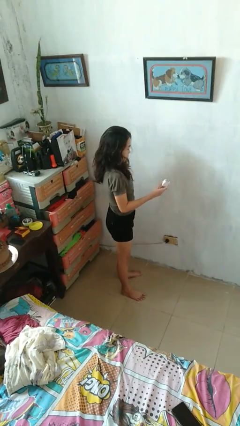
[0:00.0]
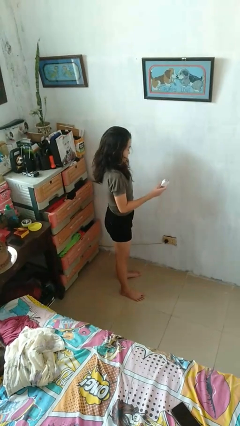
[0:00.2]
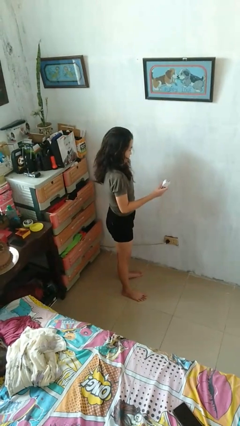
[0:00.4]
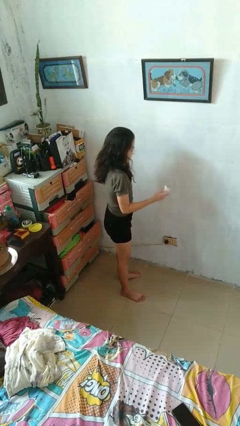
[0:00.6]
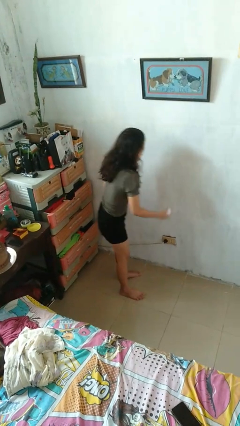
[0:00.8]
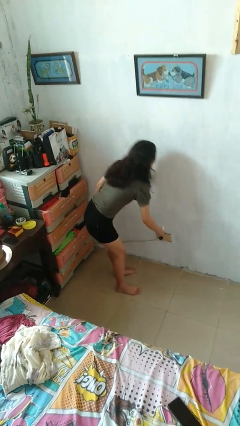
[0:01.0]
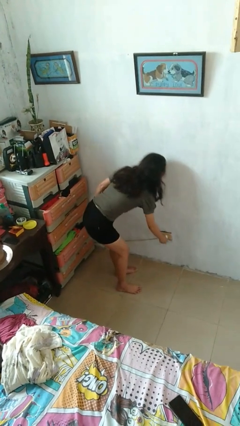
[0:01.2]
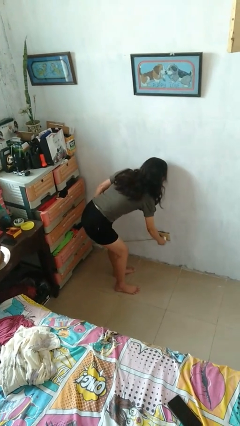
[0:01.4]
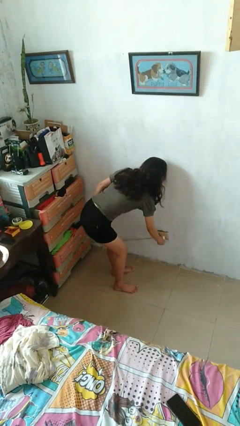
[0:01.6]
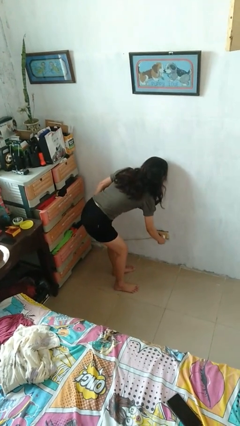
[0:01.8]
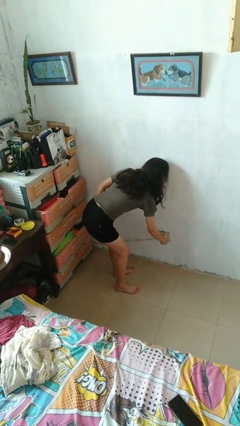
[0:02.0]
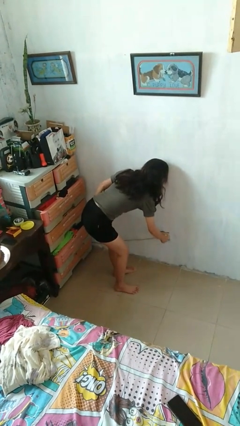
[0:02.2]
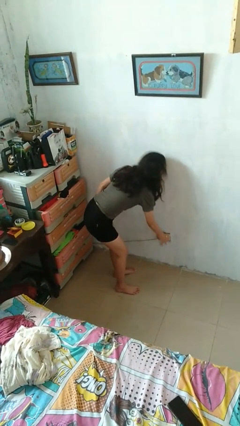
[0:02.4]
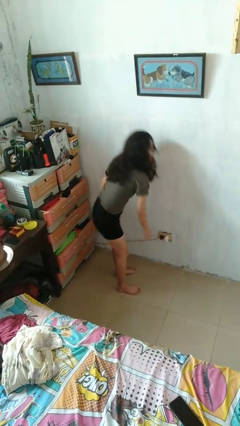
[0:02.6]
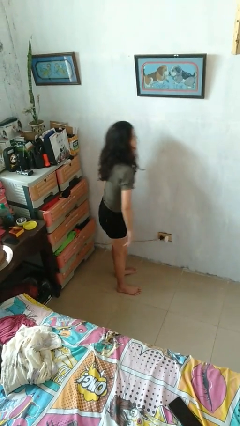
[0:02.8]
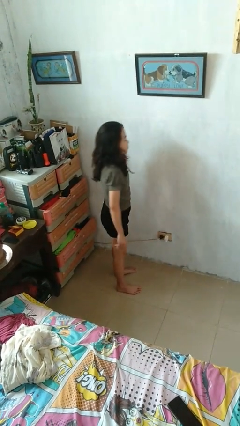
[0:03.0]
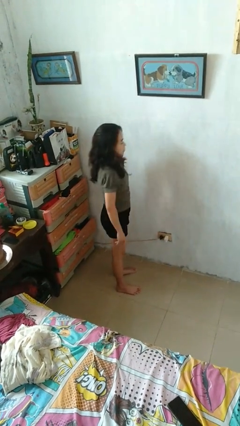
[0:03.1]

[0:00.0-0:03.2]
person plugs into electrical socket

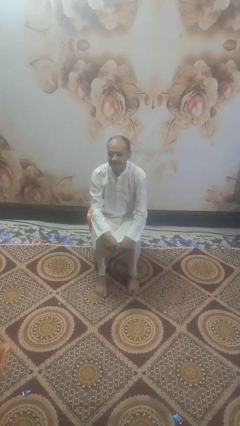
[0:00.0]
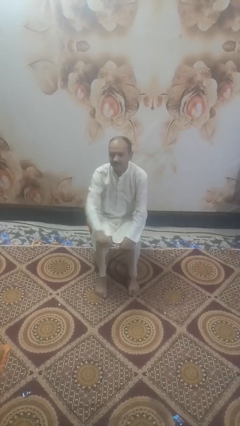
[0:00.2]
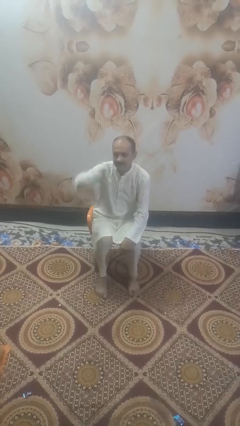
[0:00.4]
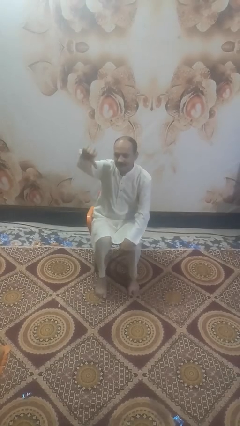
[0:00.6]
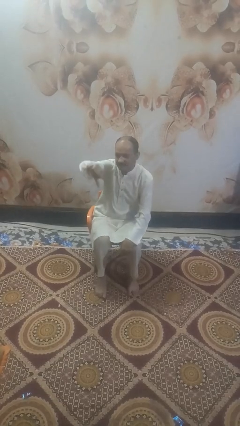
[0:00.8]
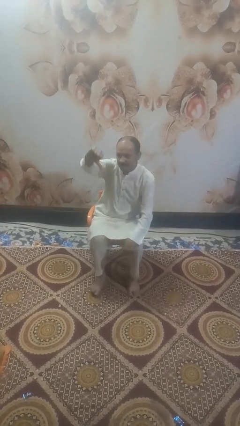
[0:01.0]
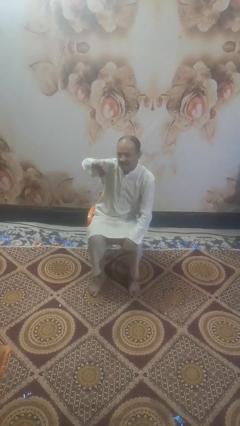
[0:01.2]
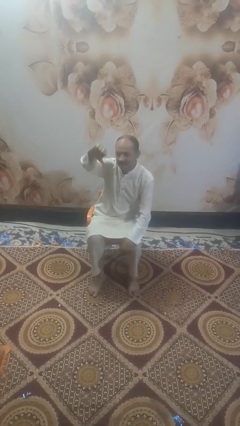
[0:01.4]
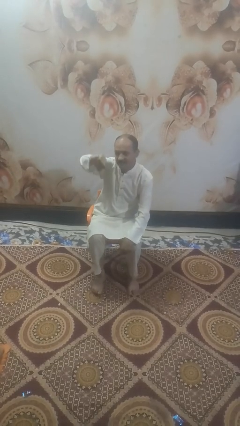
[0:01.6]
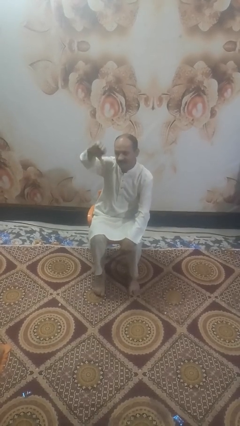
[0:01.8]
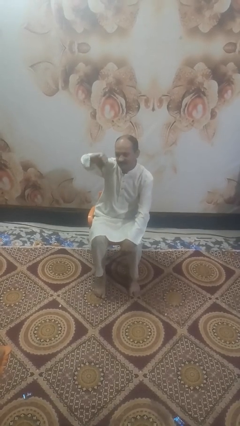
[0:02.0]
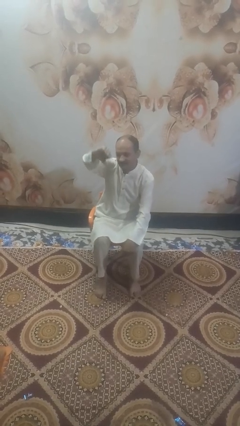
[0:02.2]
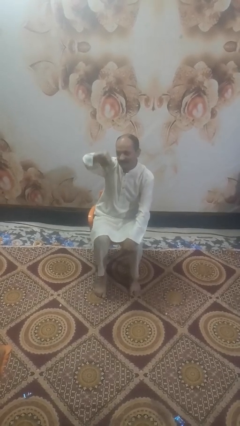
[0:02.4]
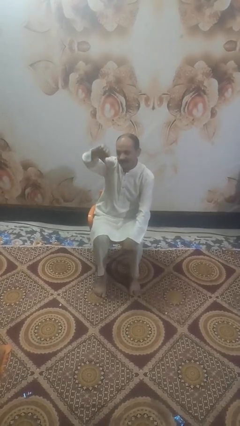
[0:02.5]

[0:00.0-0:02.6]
person gestures thumbs down

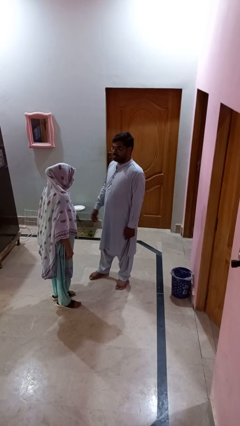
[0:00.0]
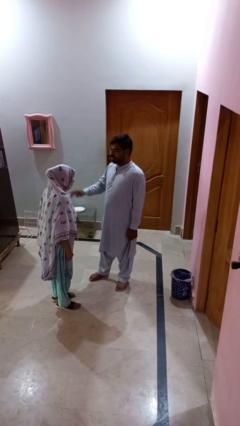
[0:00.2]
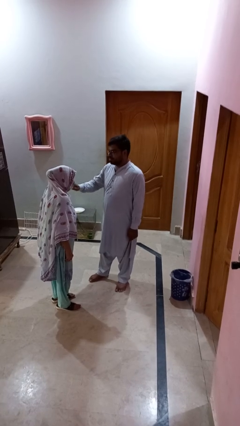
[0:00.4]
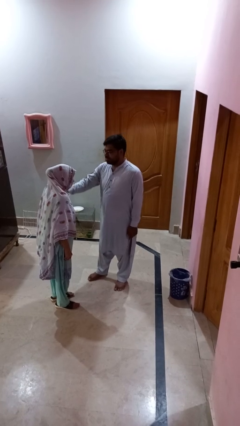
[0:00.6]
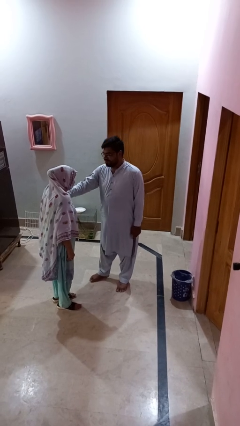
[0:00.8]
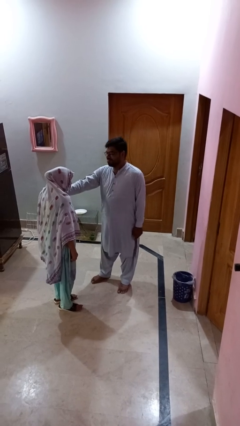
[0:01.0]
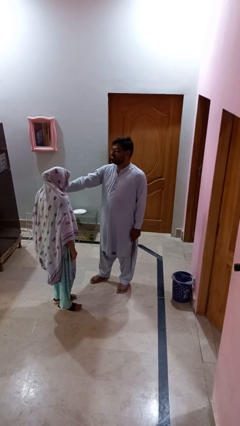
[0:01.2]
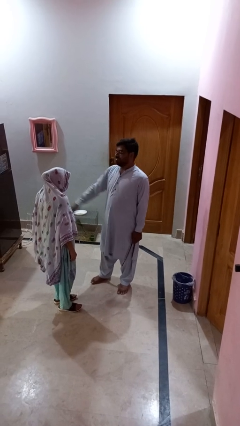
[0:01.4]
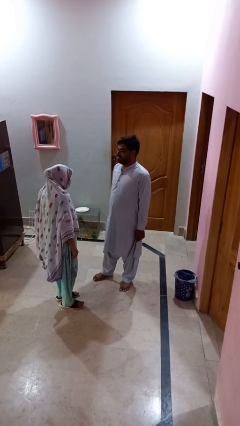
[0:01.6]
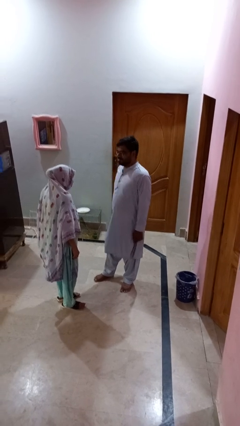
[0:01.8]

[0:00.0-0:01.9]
person shoves person

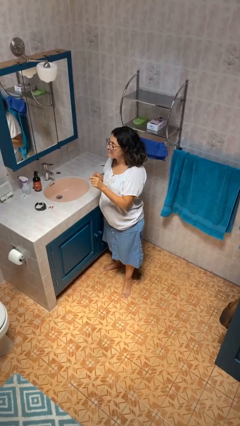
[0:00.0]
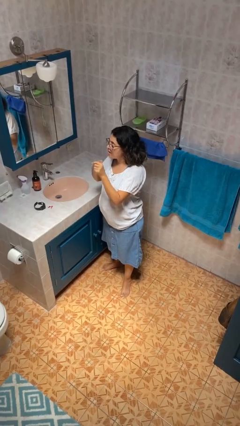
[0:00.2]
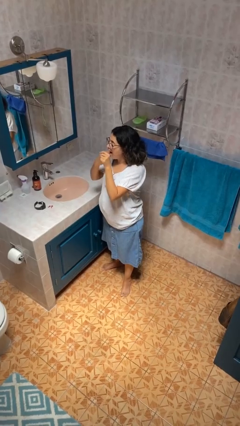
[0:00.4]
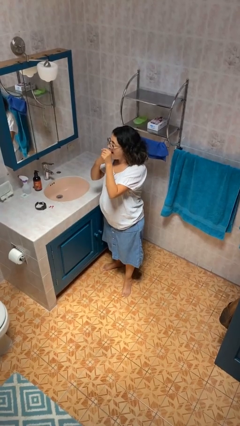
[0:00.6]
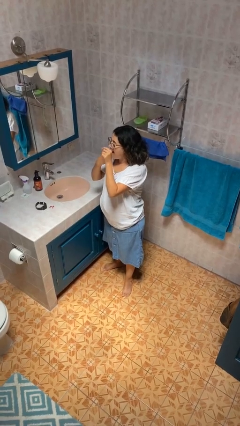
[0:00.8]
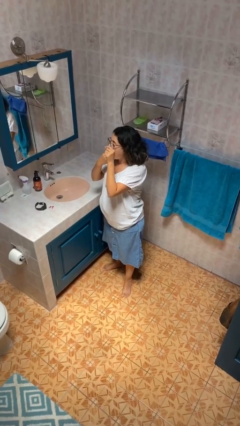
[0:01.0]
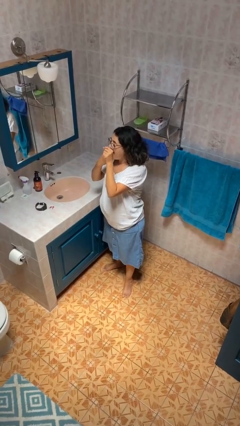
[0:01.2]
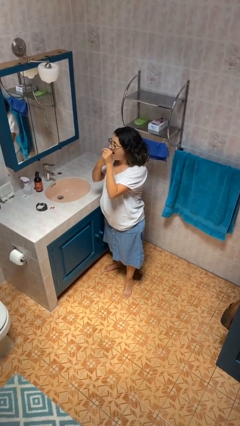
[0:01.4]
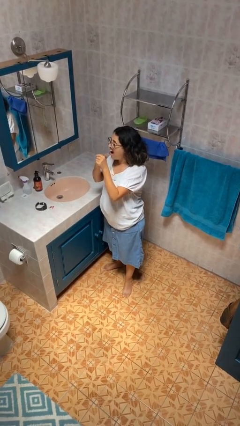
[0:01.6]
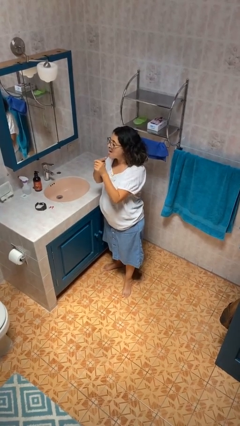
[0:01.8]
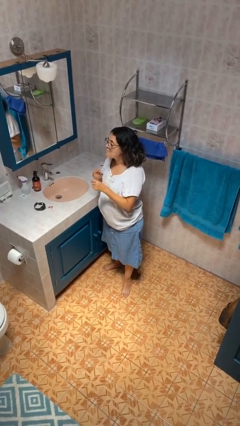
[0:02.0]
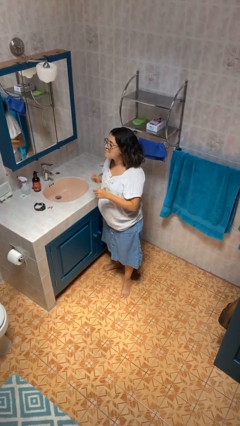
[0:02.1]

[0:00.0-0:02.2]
person flosses

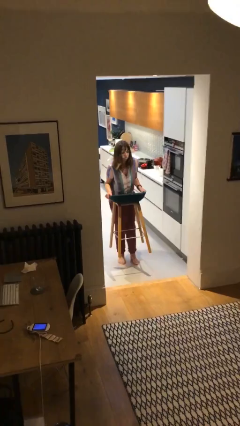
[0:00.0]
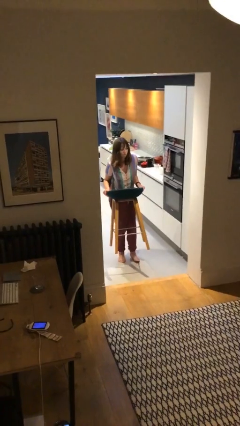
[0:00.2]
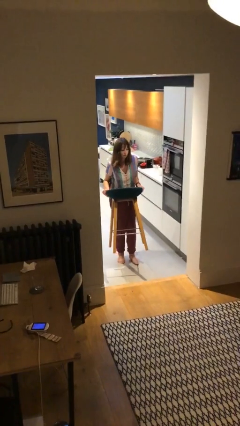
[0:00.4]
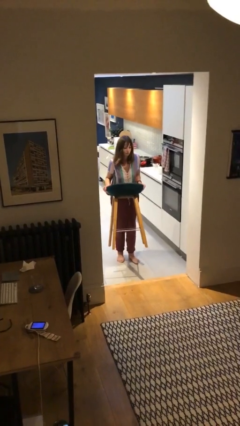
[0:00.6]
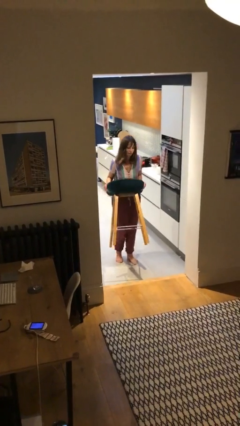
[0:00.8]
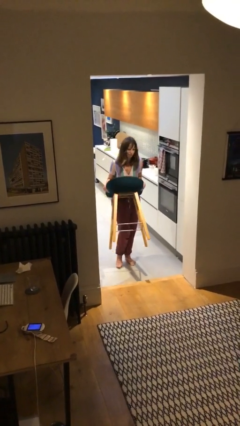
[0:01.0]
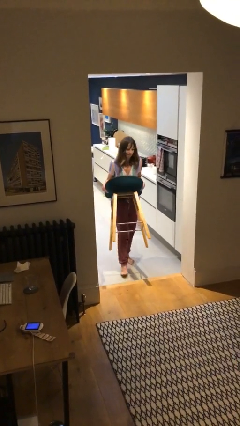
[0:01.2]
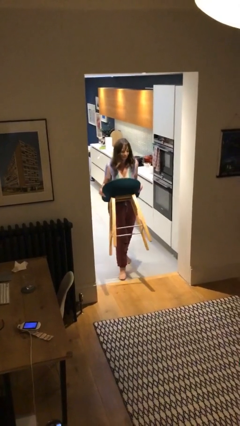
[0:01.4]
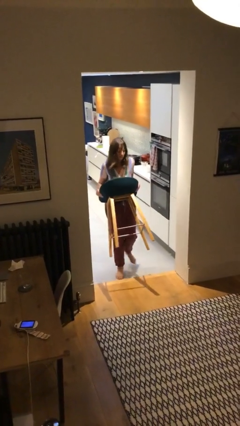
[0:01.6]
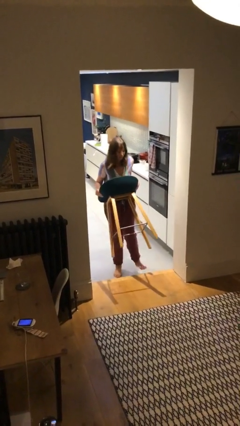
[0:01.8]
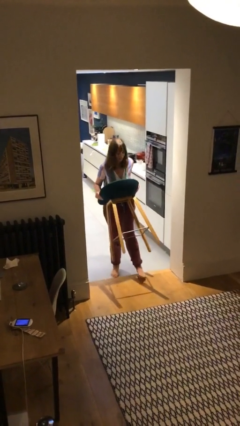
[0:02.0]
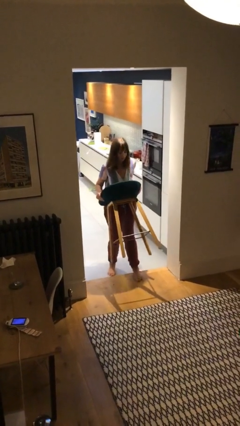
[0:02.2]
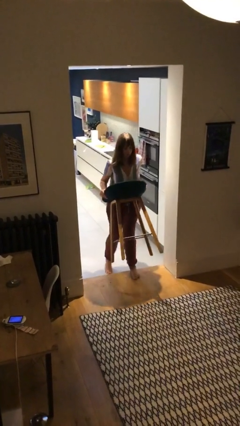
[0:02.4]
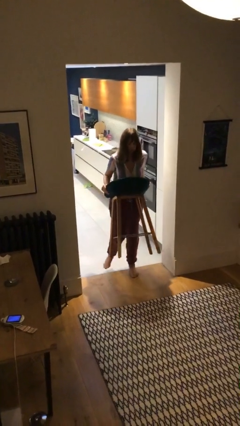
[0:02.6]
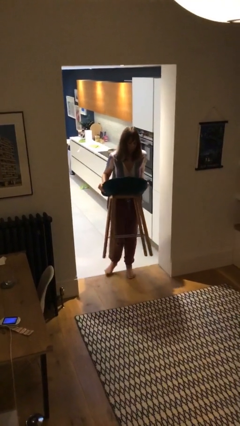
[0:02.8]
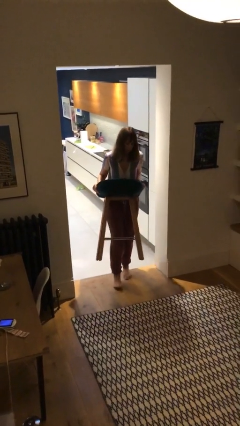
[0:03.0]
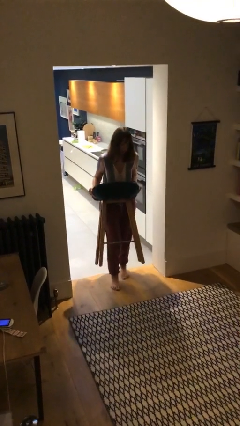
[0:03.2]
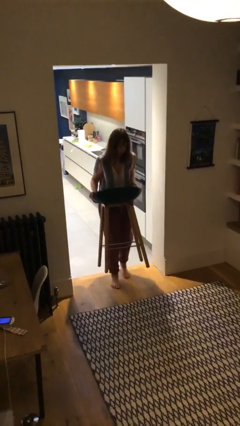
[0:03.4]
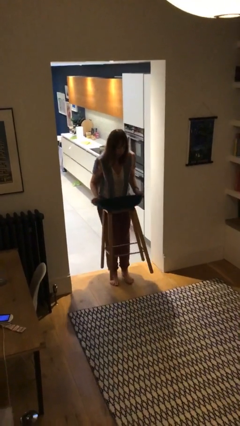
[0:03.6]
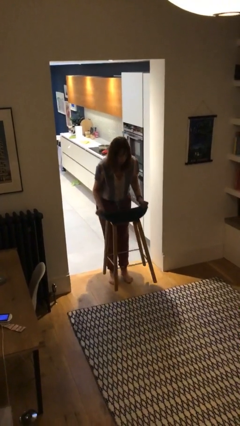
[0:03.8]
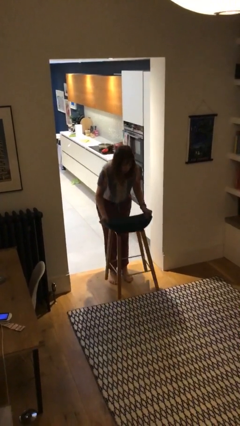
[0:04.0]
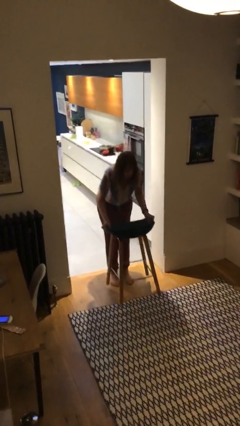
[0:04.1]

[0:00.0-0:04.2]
person carries heavy object

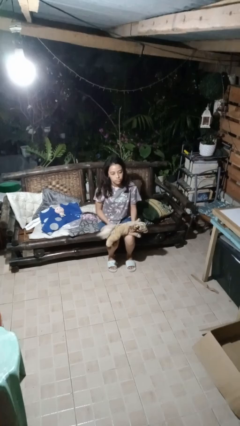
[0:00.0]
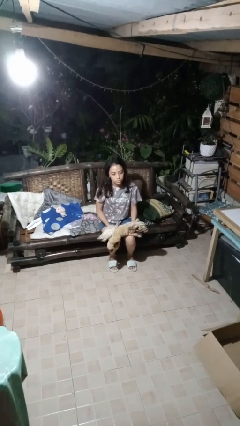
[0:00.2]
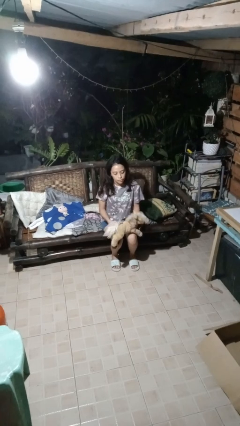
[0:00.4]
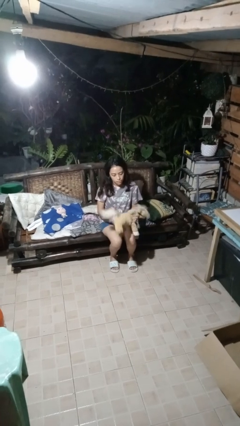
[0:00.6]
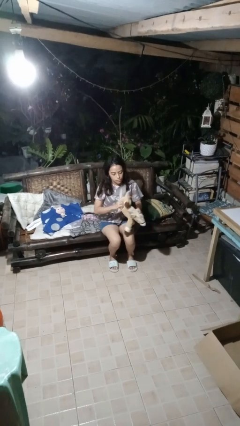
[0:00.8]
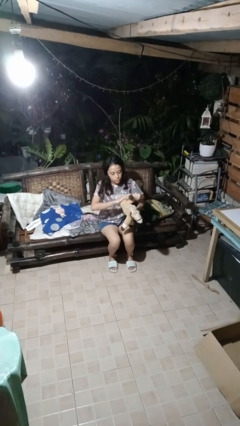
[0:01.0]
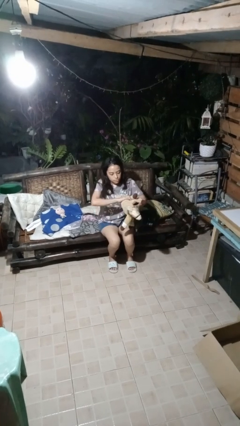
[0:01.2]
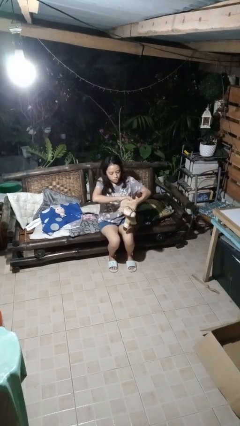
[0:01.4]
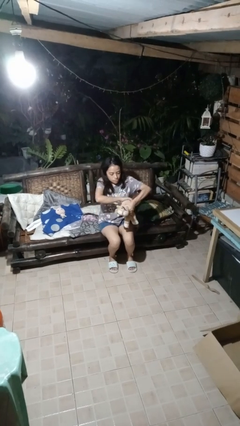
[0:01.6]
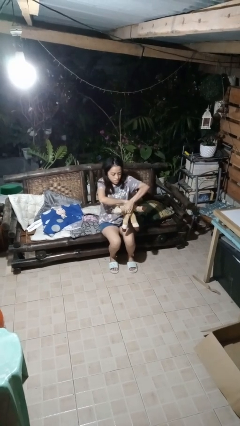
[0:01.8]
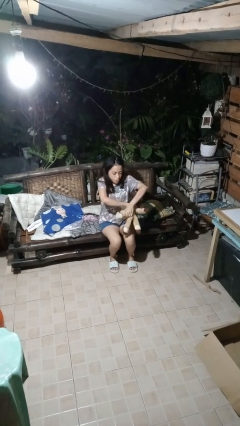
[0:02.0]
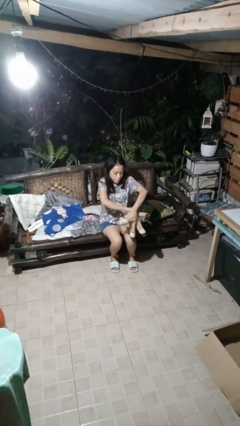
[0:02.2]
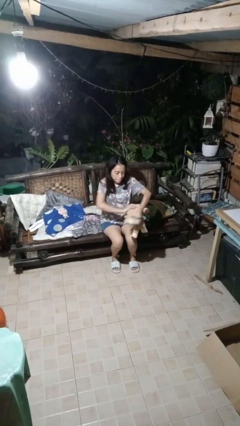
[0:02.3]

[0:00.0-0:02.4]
person squeezes object

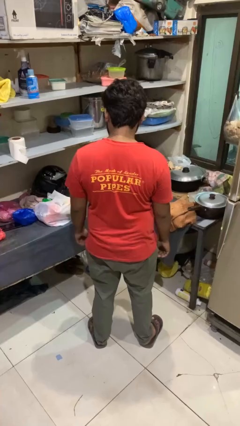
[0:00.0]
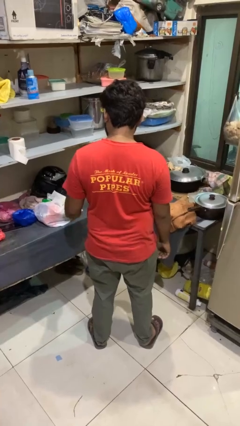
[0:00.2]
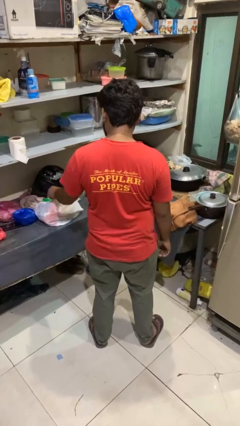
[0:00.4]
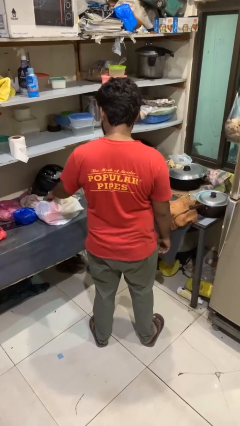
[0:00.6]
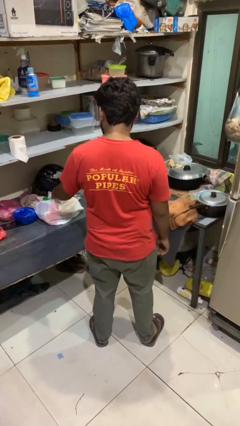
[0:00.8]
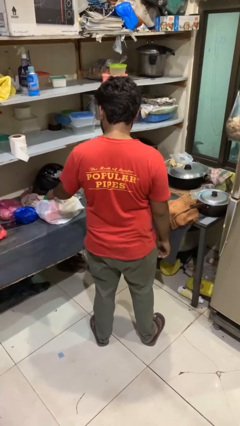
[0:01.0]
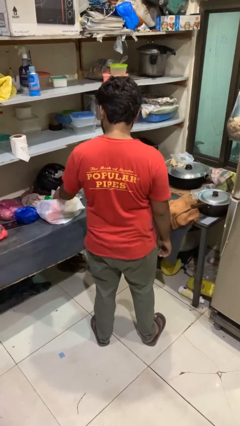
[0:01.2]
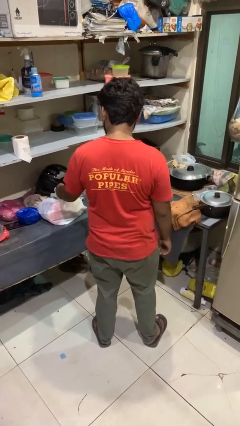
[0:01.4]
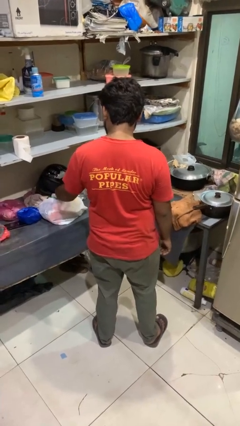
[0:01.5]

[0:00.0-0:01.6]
person takes object from bag
